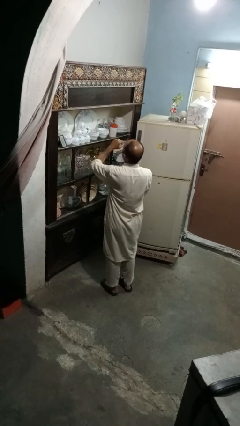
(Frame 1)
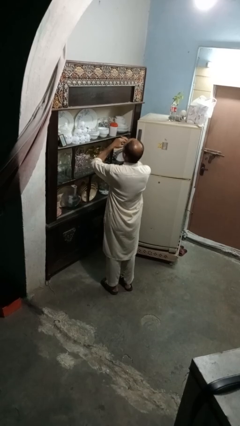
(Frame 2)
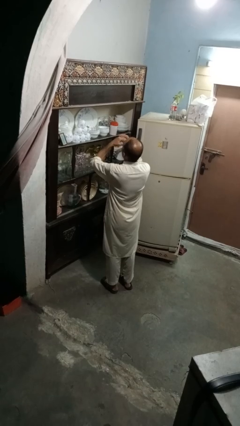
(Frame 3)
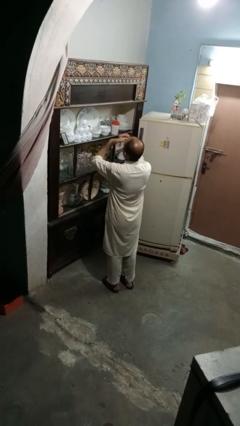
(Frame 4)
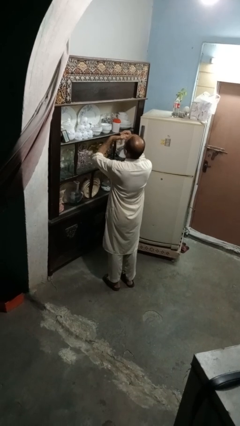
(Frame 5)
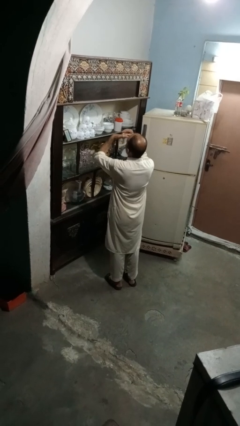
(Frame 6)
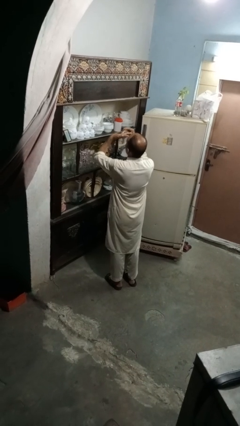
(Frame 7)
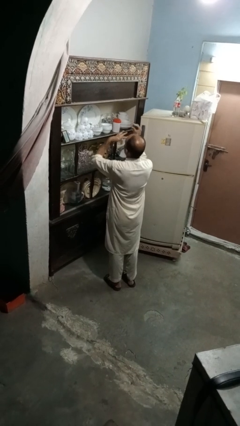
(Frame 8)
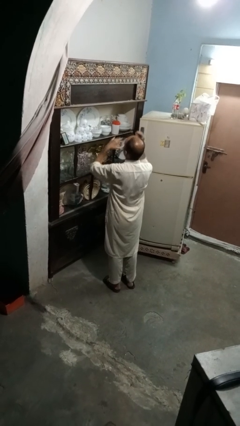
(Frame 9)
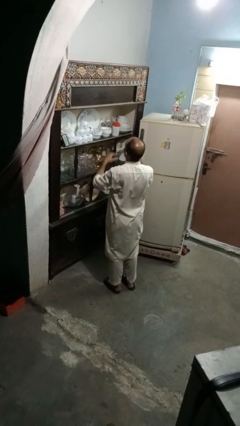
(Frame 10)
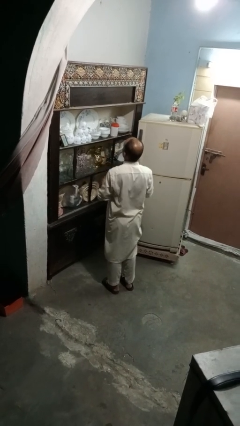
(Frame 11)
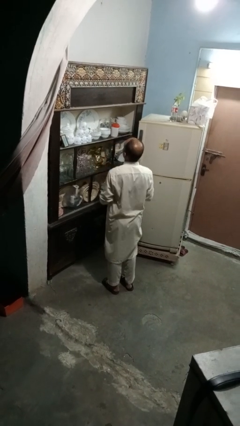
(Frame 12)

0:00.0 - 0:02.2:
person takes off ring

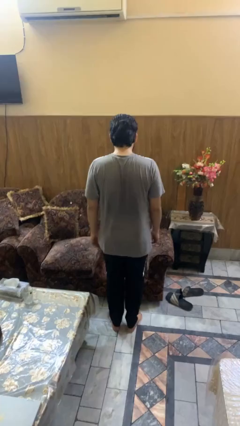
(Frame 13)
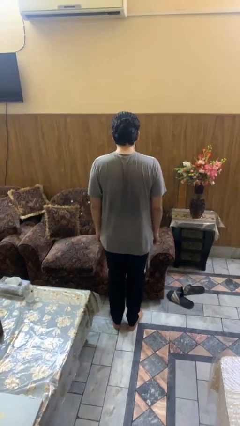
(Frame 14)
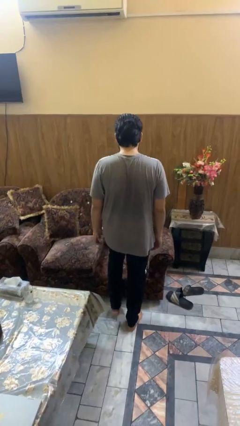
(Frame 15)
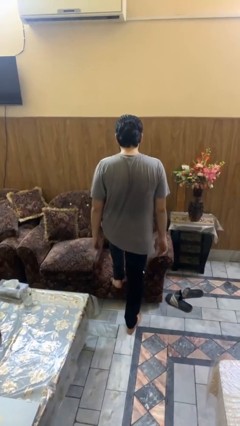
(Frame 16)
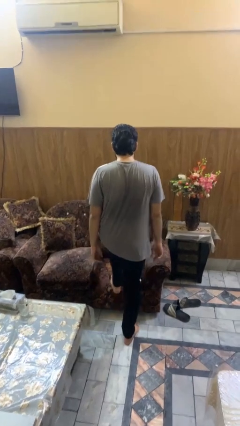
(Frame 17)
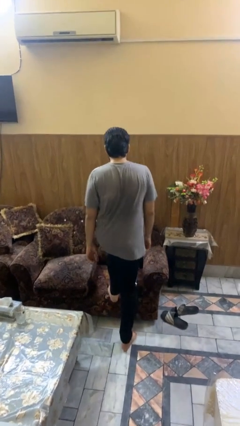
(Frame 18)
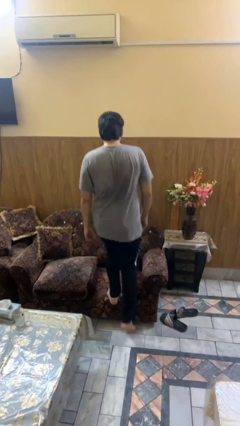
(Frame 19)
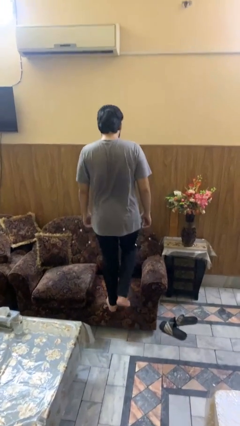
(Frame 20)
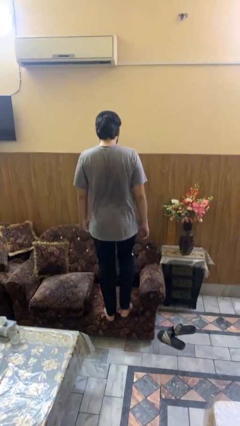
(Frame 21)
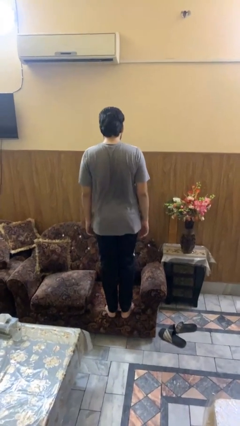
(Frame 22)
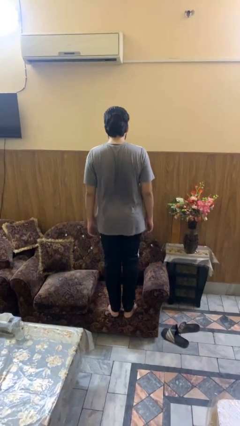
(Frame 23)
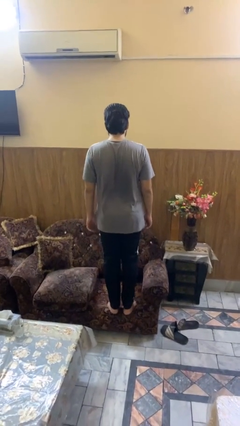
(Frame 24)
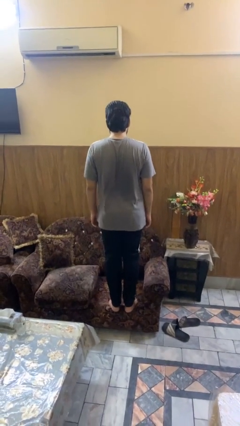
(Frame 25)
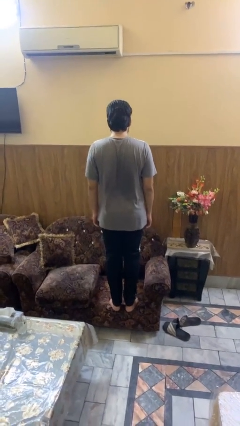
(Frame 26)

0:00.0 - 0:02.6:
person climbs on couch

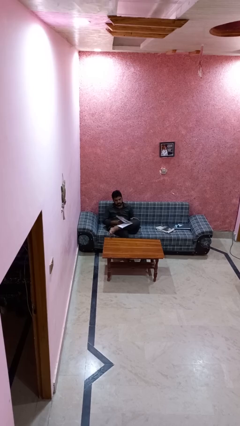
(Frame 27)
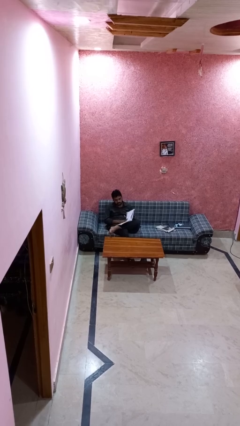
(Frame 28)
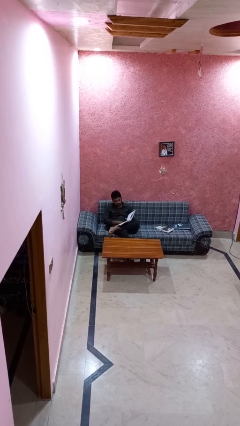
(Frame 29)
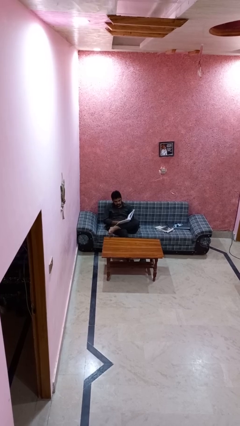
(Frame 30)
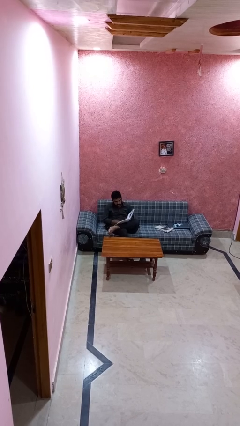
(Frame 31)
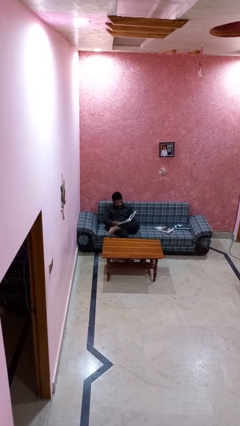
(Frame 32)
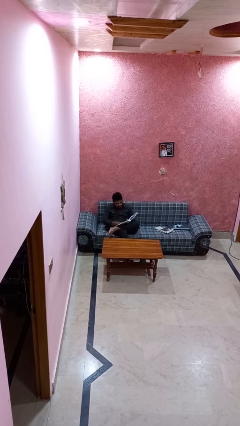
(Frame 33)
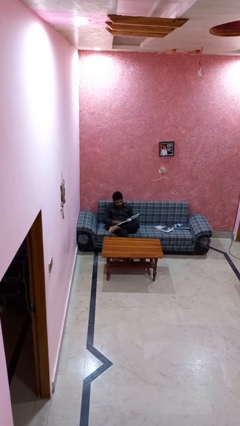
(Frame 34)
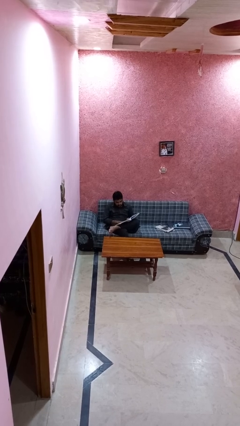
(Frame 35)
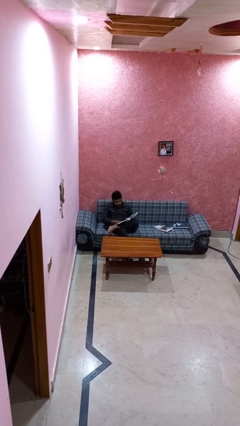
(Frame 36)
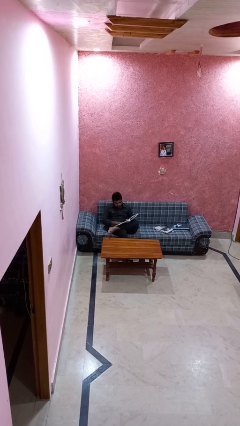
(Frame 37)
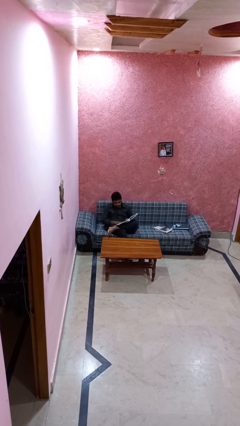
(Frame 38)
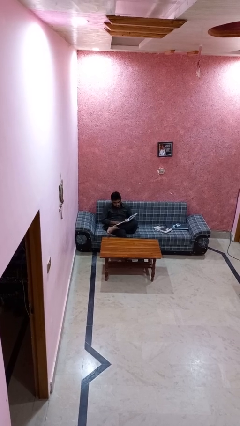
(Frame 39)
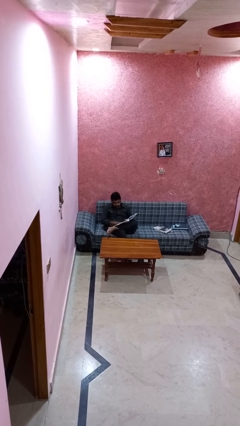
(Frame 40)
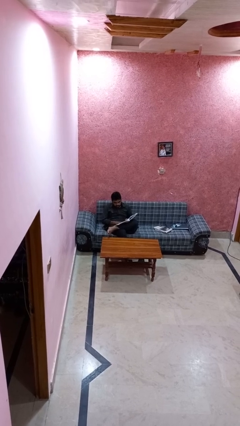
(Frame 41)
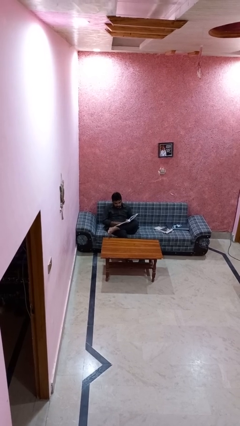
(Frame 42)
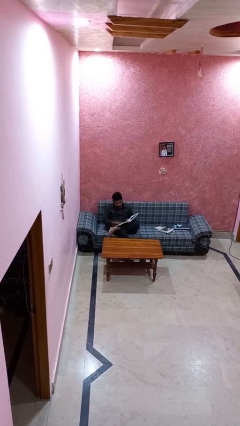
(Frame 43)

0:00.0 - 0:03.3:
person reads magazine

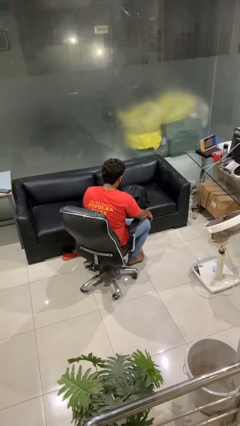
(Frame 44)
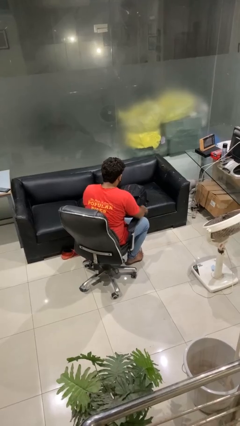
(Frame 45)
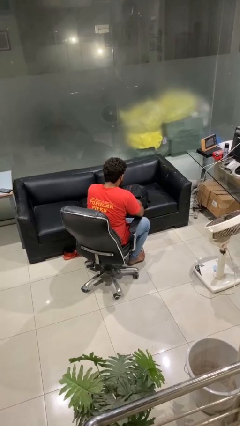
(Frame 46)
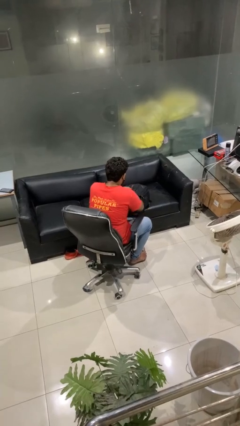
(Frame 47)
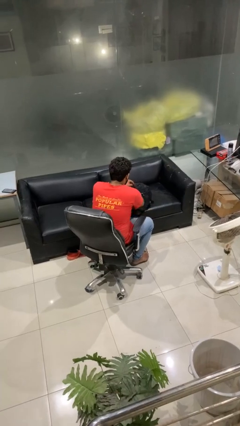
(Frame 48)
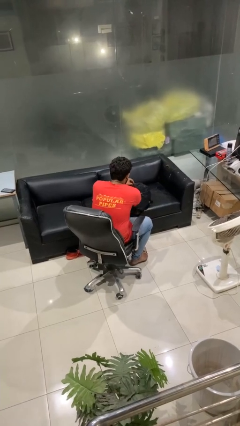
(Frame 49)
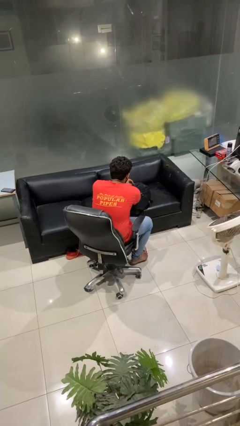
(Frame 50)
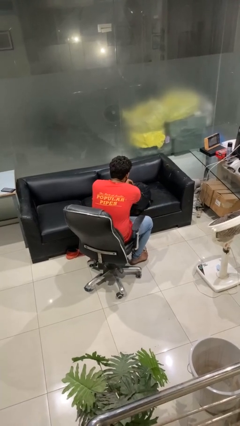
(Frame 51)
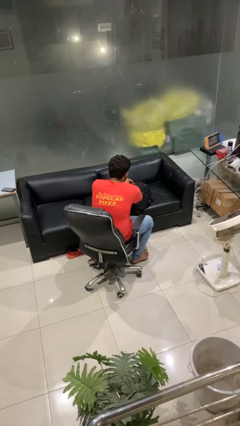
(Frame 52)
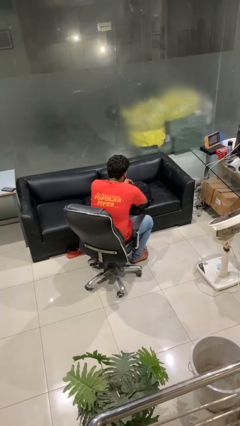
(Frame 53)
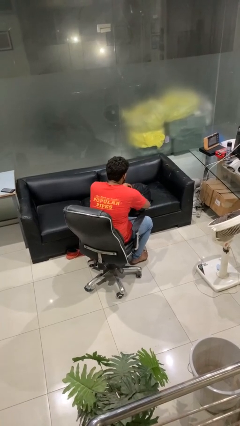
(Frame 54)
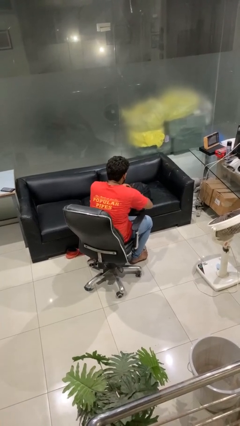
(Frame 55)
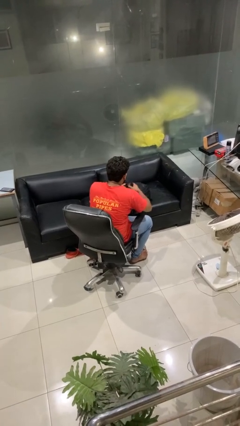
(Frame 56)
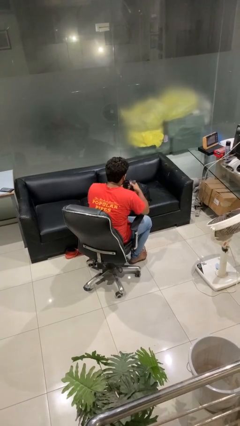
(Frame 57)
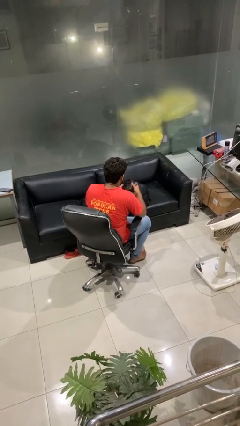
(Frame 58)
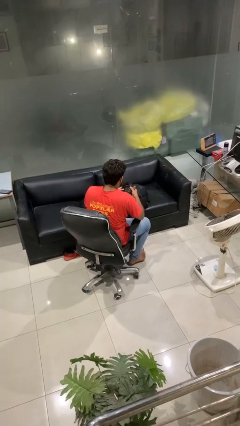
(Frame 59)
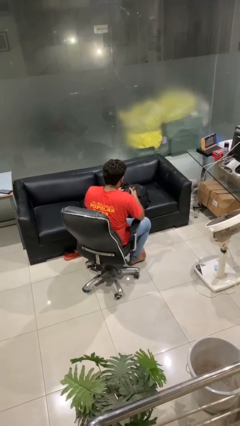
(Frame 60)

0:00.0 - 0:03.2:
person searches in backpack

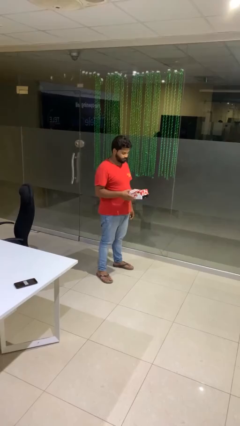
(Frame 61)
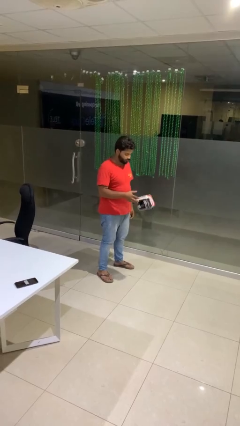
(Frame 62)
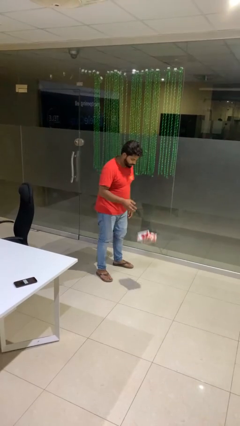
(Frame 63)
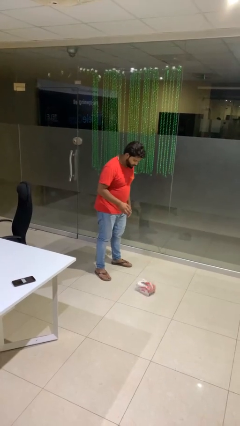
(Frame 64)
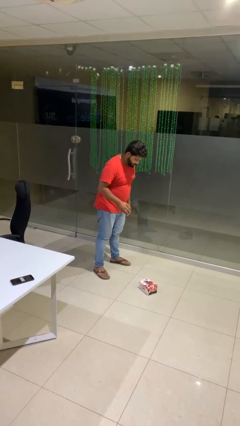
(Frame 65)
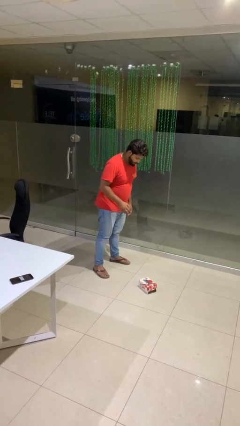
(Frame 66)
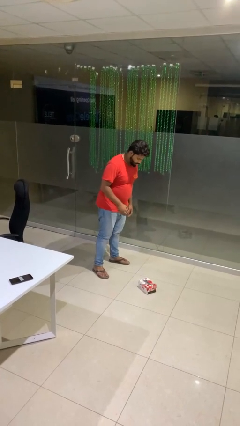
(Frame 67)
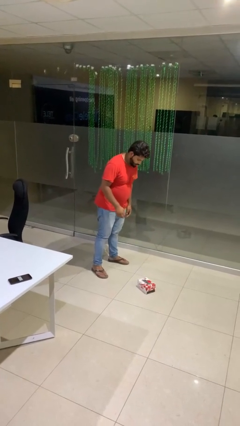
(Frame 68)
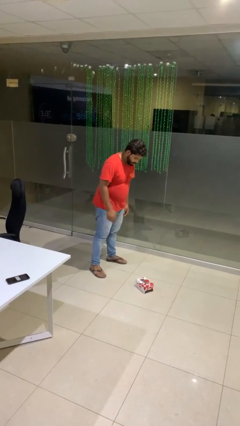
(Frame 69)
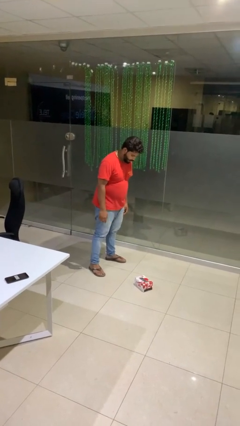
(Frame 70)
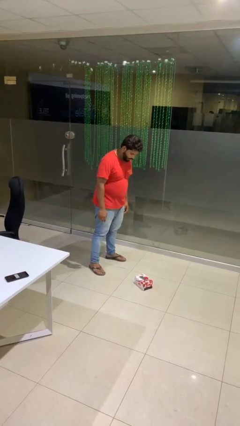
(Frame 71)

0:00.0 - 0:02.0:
person drops object

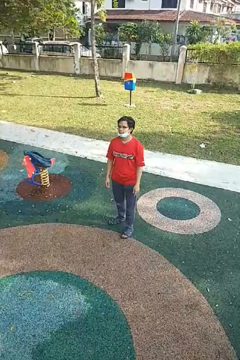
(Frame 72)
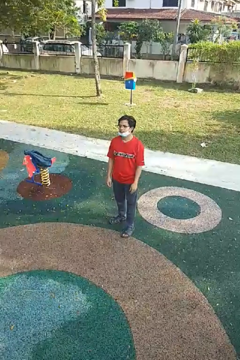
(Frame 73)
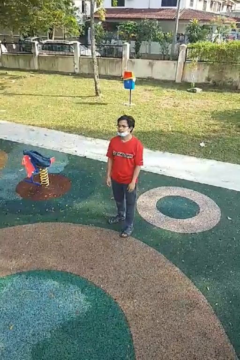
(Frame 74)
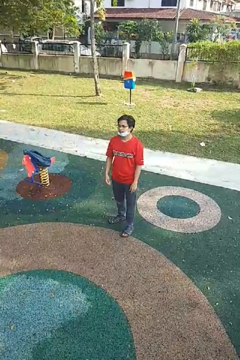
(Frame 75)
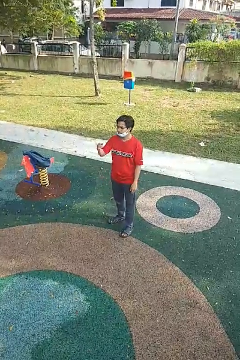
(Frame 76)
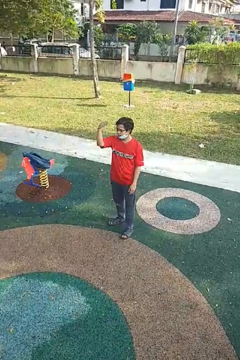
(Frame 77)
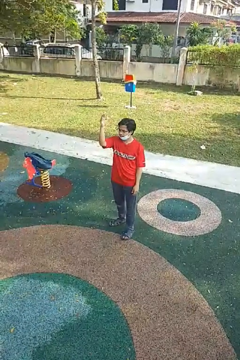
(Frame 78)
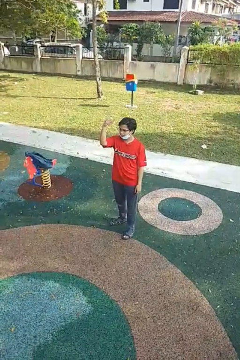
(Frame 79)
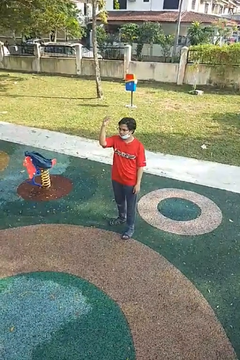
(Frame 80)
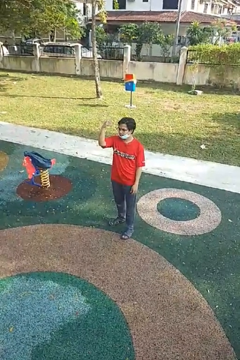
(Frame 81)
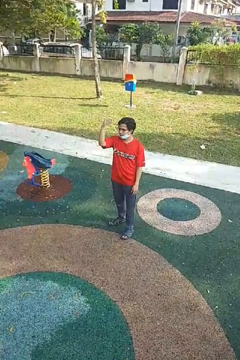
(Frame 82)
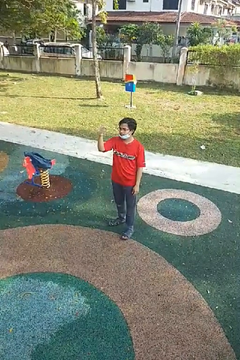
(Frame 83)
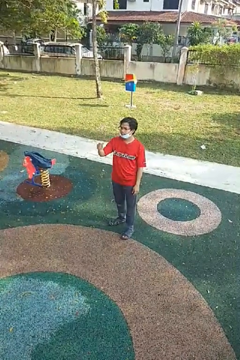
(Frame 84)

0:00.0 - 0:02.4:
person gestures come here

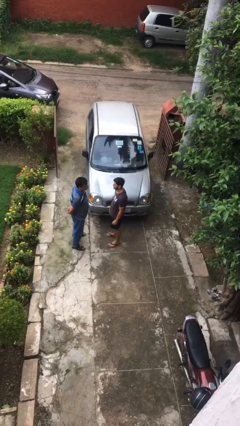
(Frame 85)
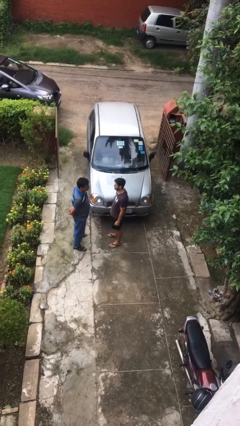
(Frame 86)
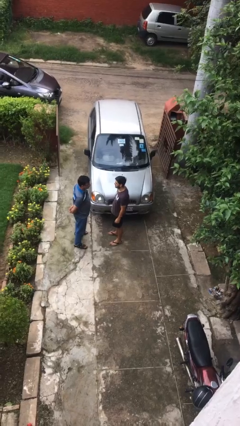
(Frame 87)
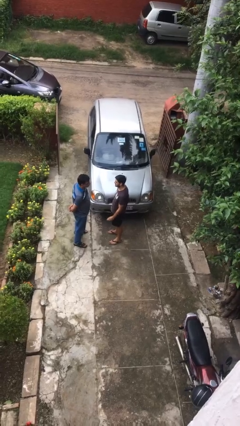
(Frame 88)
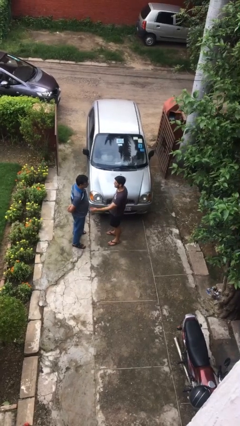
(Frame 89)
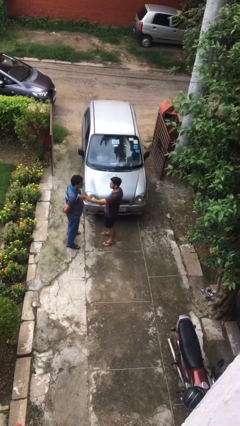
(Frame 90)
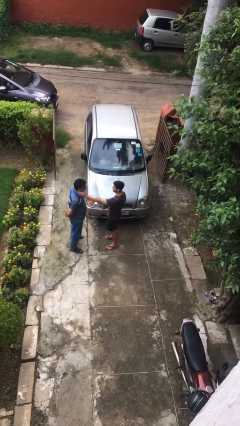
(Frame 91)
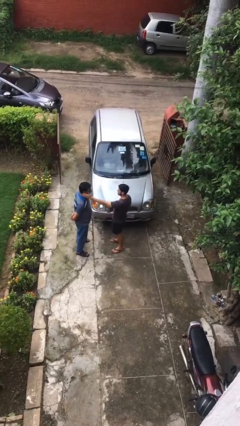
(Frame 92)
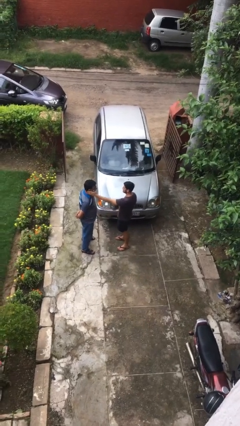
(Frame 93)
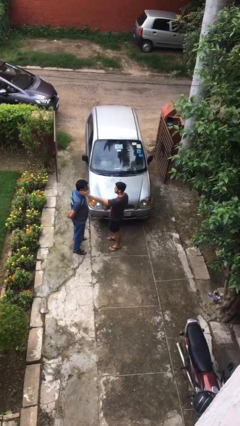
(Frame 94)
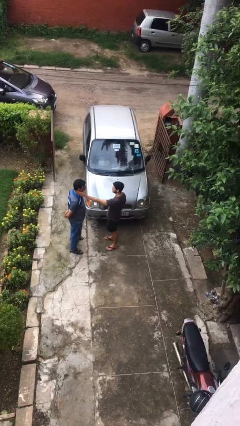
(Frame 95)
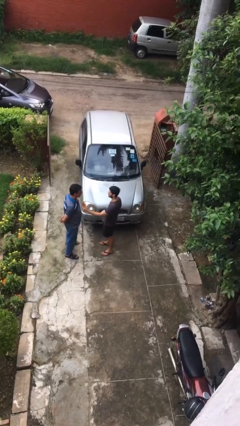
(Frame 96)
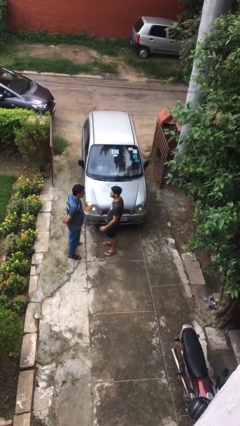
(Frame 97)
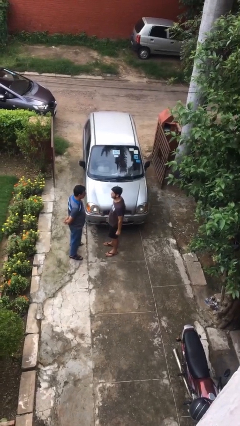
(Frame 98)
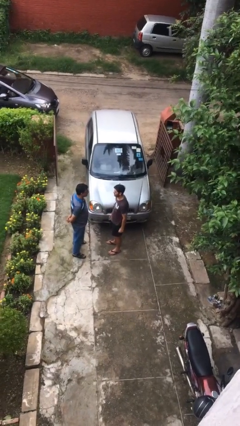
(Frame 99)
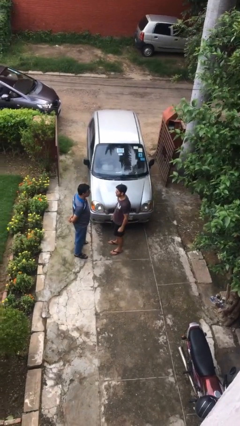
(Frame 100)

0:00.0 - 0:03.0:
person touches face of person
